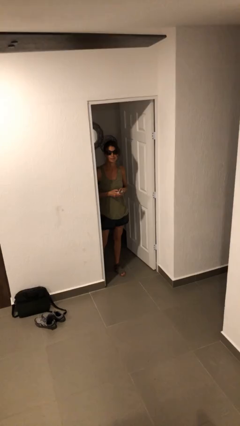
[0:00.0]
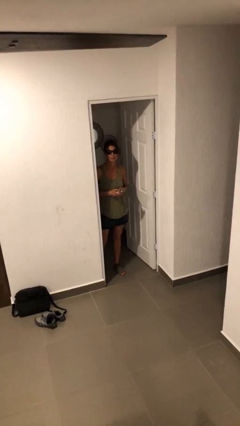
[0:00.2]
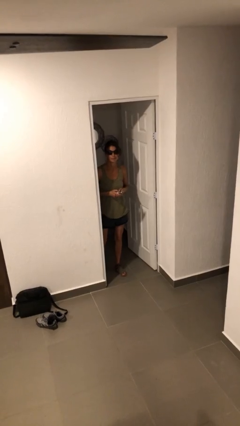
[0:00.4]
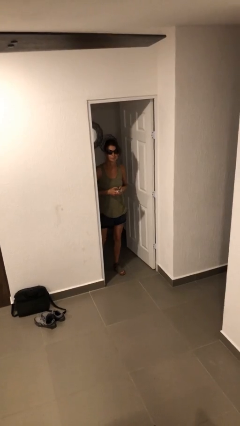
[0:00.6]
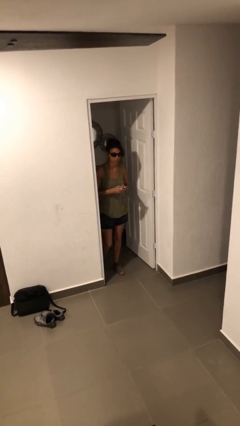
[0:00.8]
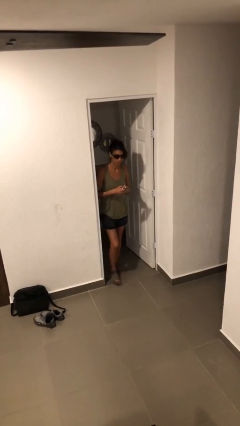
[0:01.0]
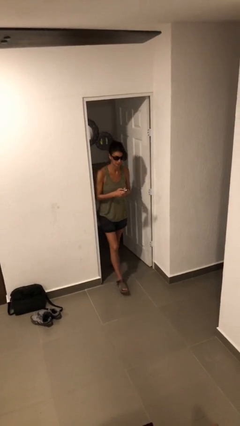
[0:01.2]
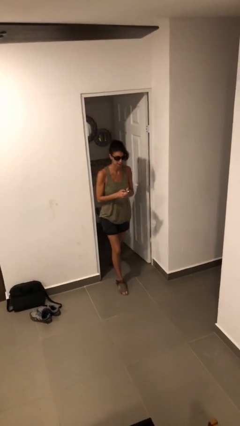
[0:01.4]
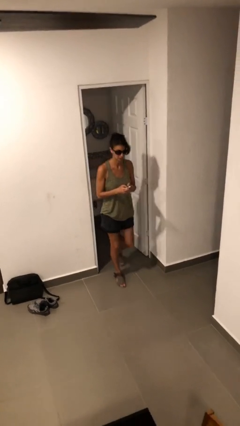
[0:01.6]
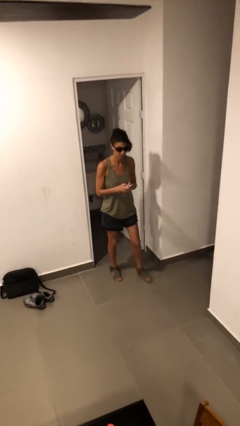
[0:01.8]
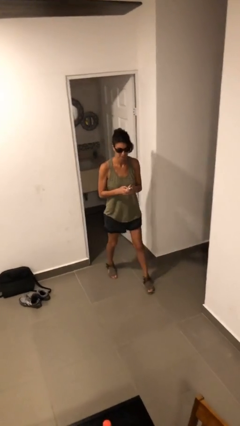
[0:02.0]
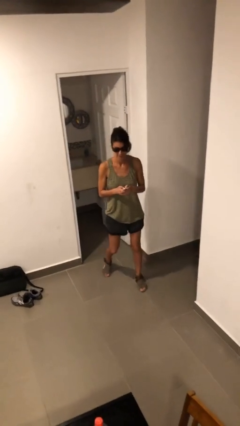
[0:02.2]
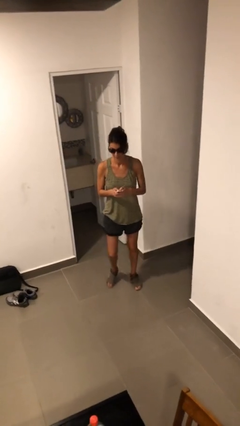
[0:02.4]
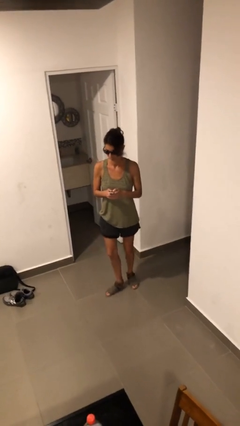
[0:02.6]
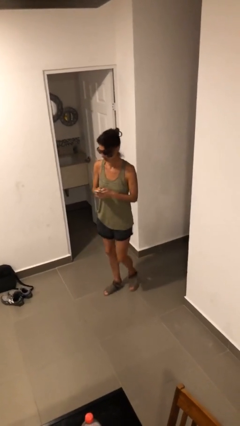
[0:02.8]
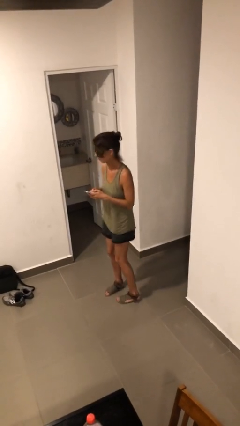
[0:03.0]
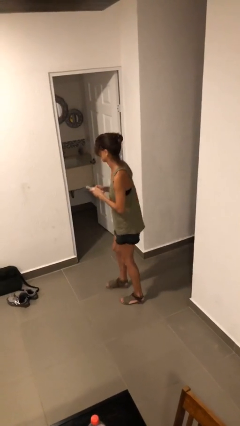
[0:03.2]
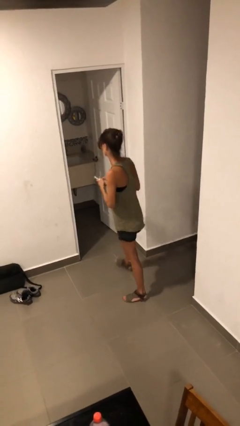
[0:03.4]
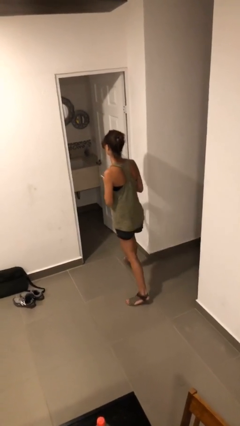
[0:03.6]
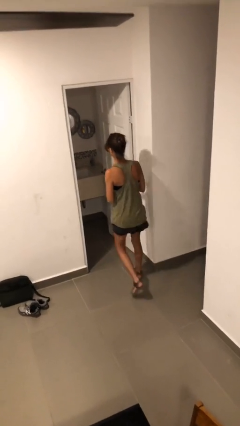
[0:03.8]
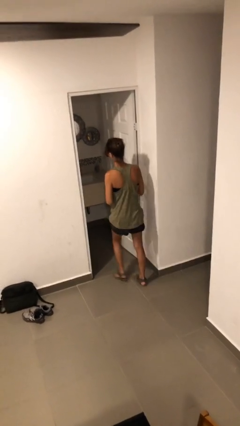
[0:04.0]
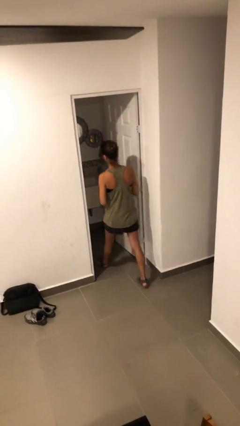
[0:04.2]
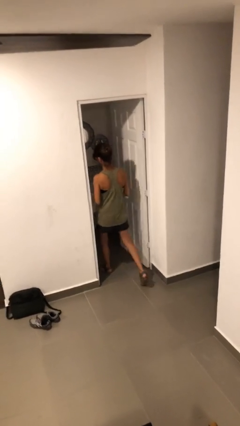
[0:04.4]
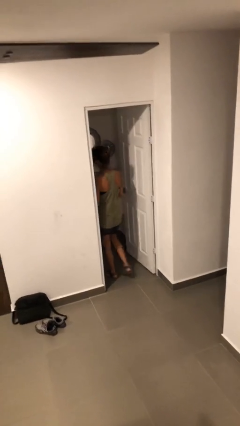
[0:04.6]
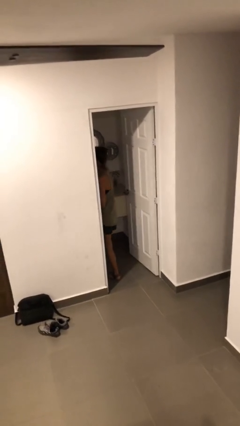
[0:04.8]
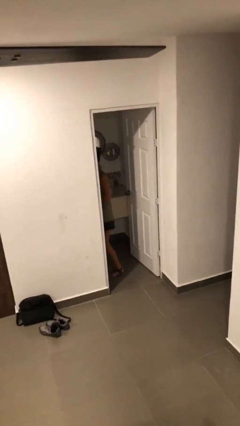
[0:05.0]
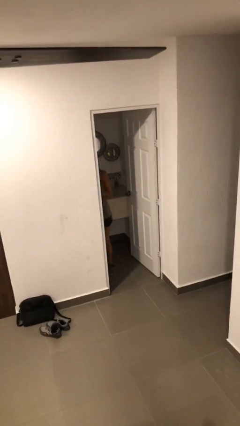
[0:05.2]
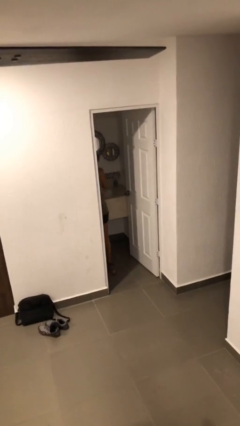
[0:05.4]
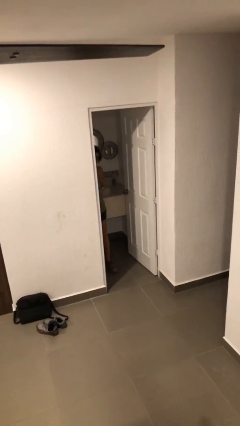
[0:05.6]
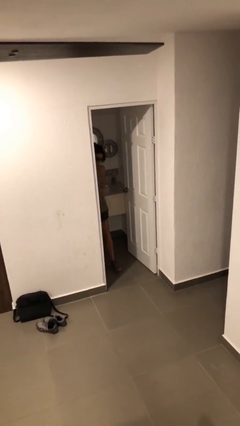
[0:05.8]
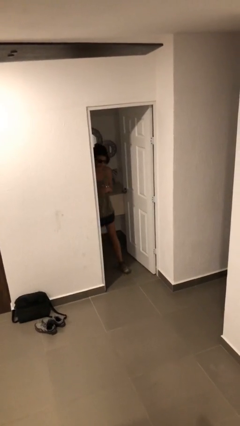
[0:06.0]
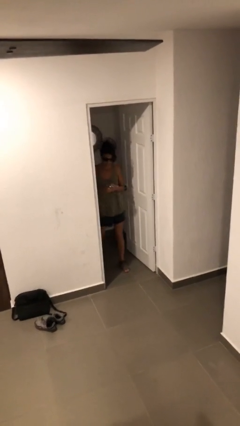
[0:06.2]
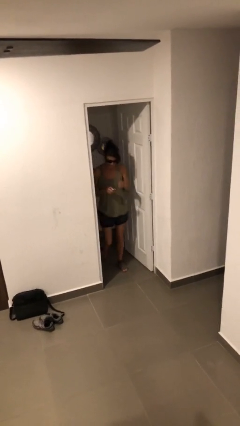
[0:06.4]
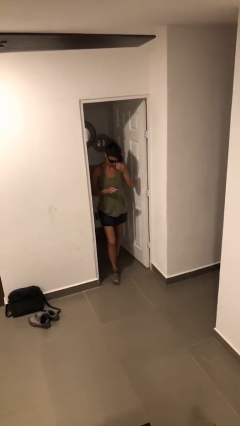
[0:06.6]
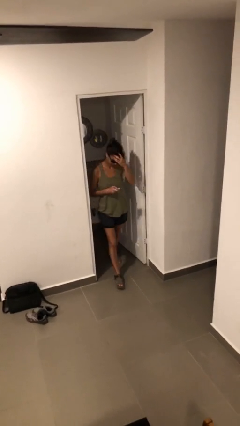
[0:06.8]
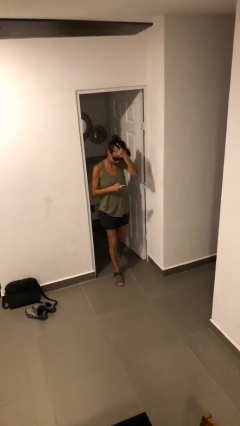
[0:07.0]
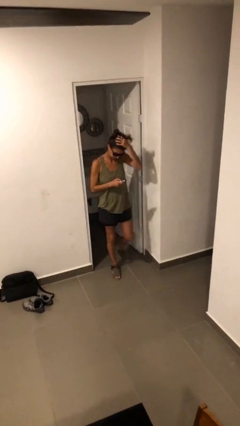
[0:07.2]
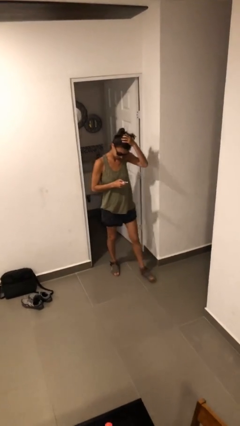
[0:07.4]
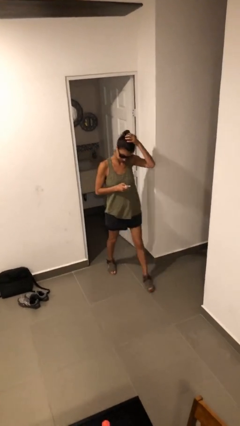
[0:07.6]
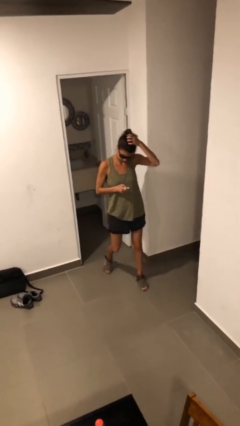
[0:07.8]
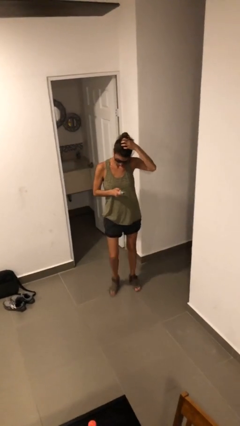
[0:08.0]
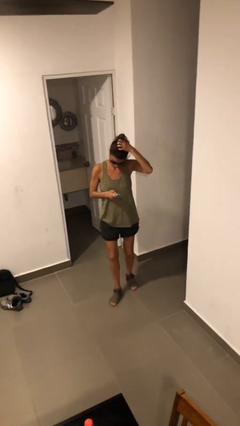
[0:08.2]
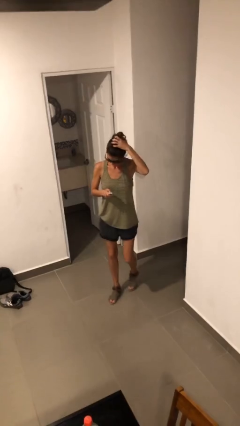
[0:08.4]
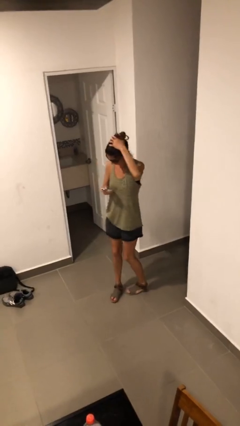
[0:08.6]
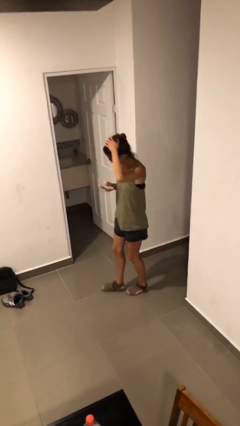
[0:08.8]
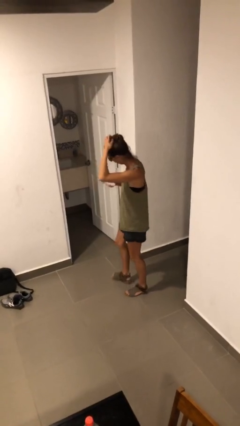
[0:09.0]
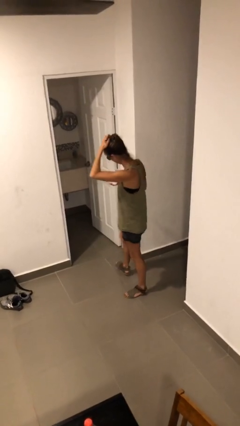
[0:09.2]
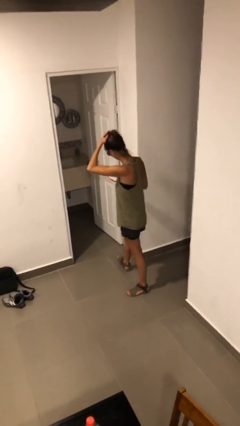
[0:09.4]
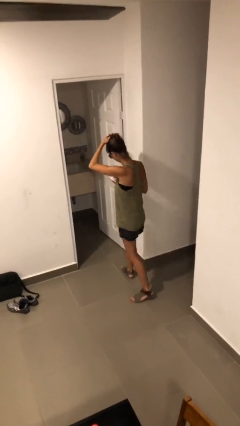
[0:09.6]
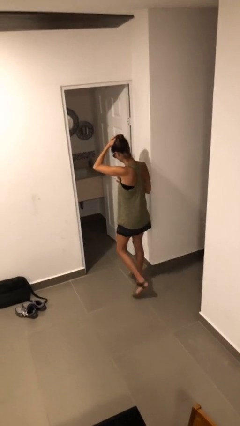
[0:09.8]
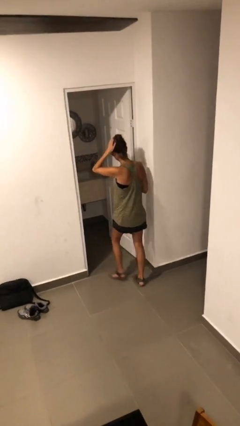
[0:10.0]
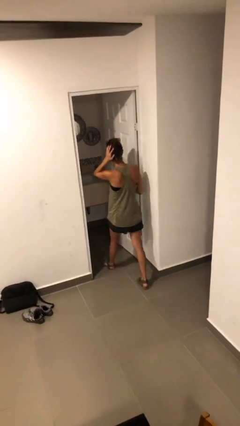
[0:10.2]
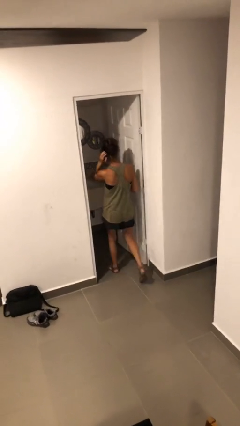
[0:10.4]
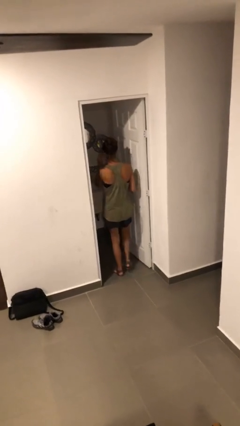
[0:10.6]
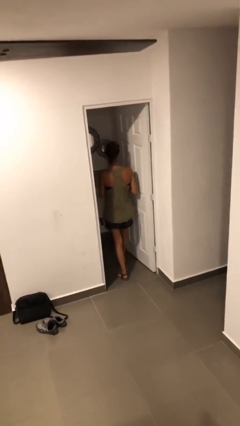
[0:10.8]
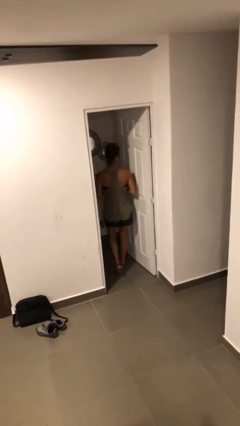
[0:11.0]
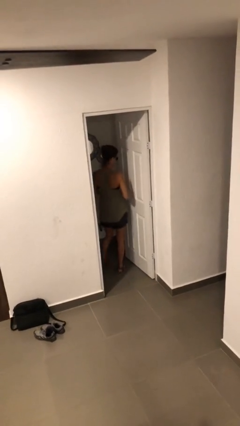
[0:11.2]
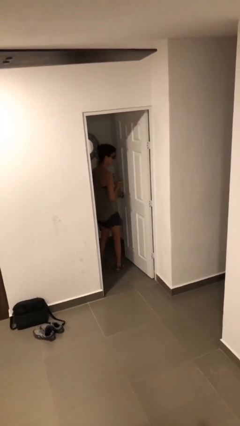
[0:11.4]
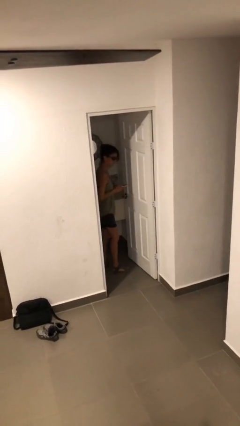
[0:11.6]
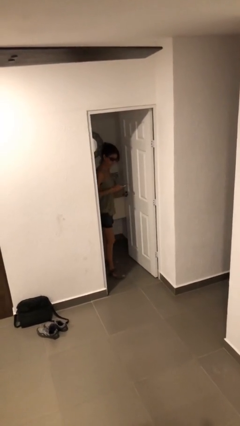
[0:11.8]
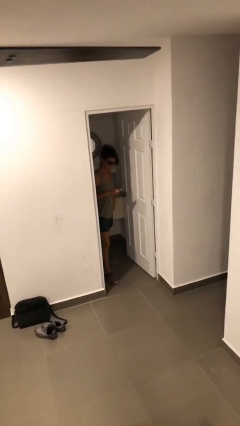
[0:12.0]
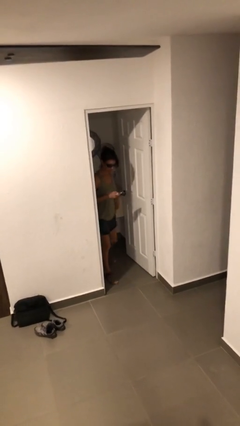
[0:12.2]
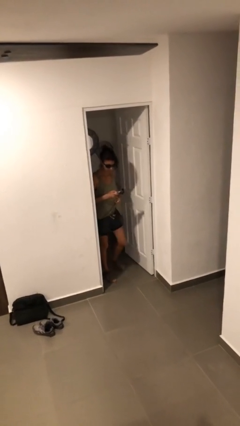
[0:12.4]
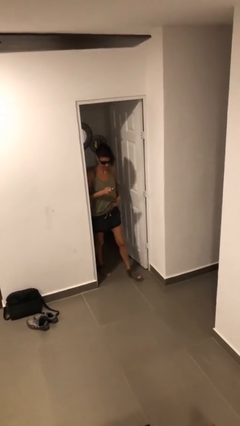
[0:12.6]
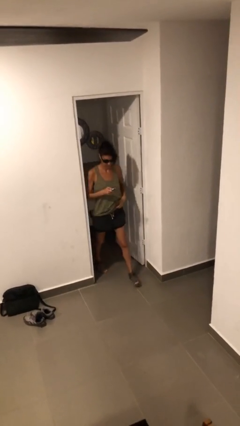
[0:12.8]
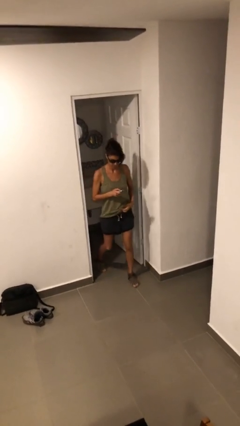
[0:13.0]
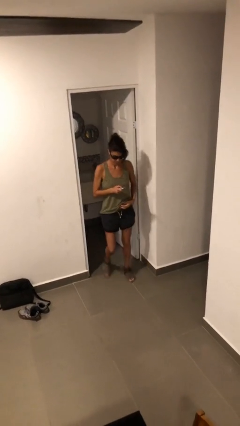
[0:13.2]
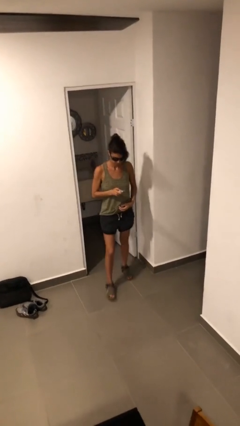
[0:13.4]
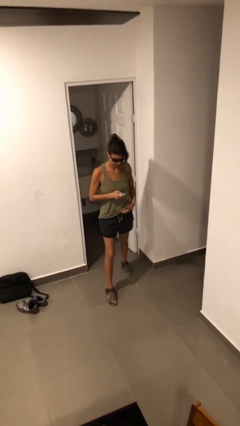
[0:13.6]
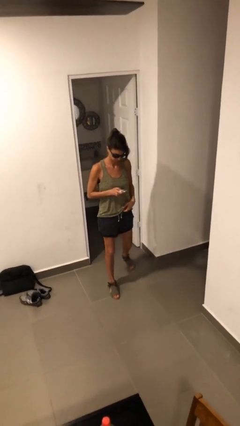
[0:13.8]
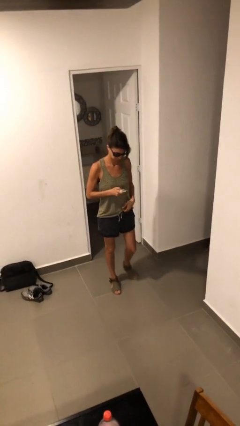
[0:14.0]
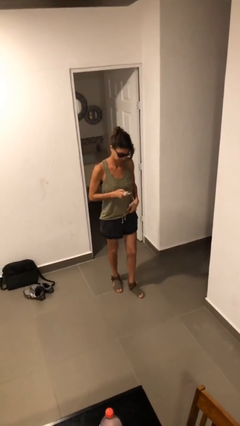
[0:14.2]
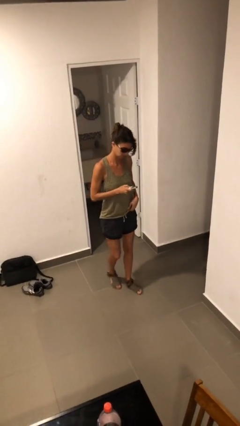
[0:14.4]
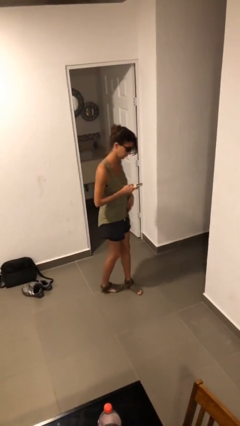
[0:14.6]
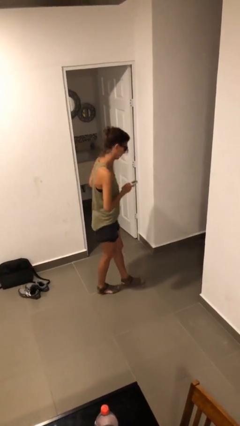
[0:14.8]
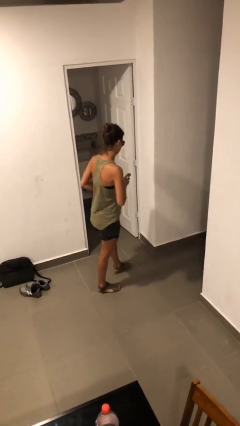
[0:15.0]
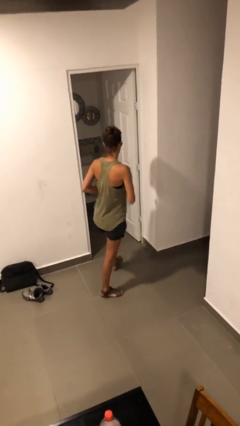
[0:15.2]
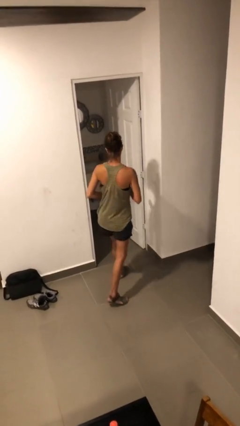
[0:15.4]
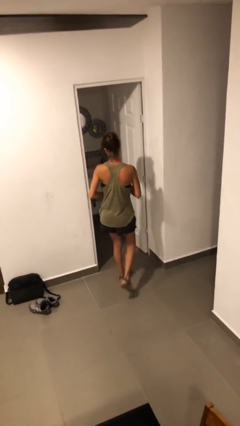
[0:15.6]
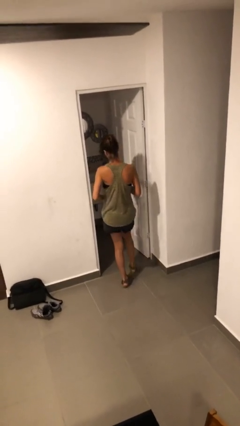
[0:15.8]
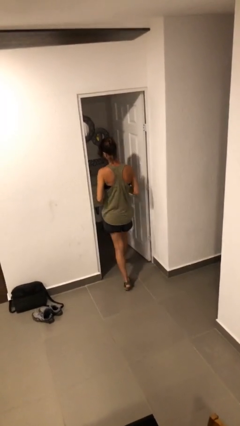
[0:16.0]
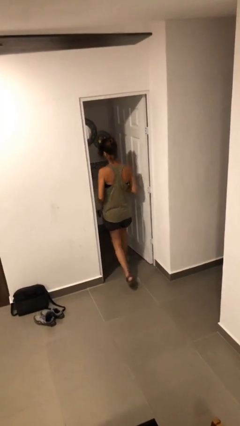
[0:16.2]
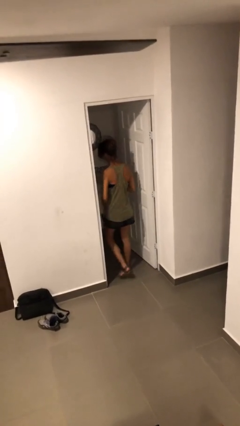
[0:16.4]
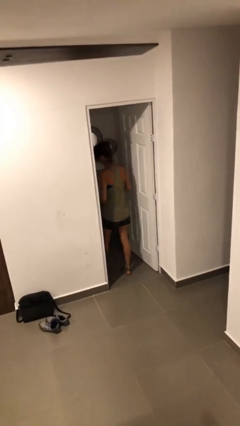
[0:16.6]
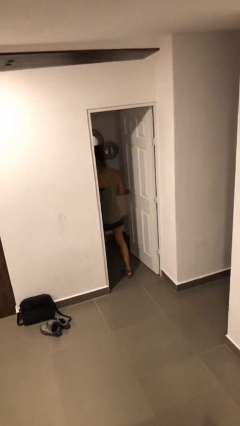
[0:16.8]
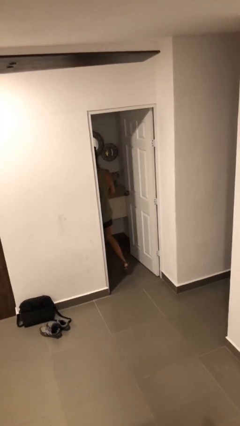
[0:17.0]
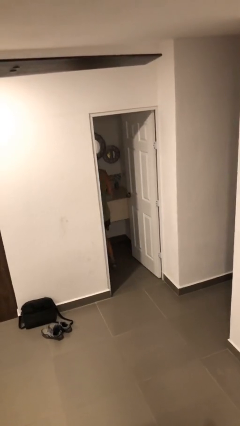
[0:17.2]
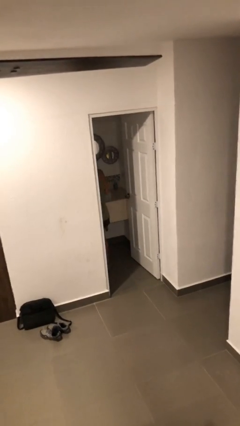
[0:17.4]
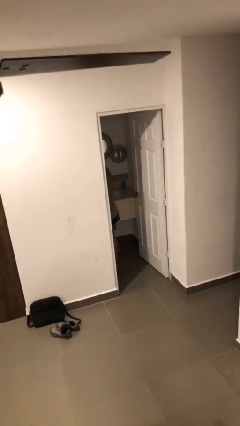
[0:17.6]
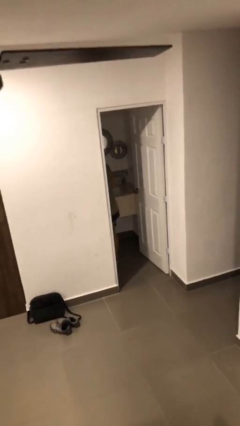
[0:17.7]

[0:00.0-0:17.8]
person texts on phone

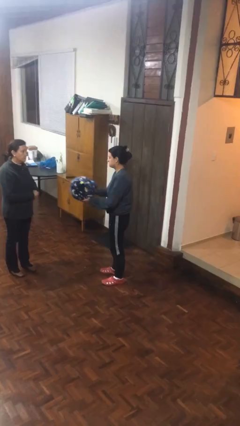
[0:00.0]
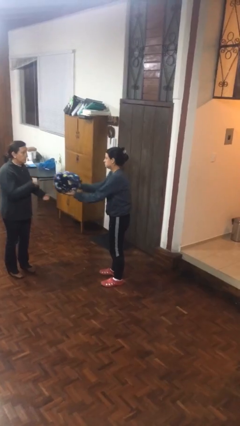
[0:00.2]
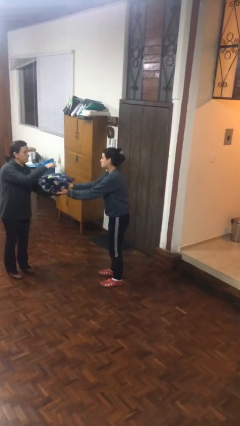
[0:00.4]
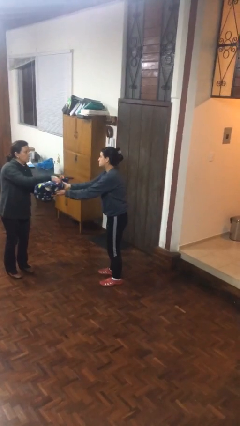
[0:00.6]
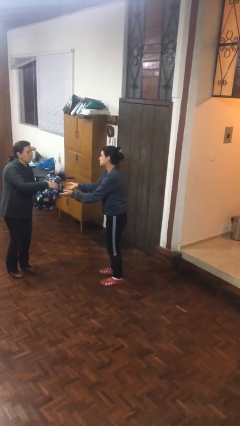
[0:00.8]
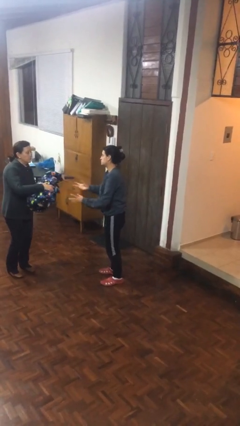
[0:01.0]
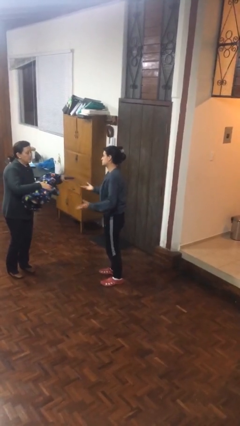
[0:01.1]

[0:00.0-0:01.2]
person transfers object to person
